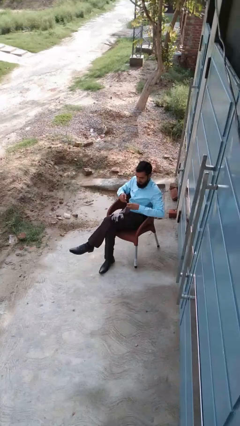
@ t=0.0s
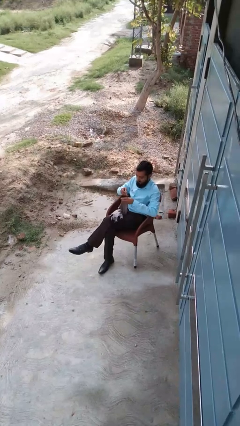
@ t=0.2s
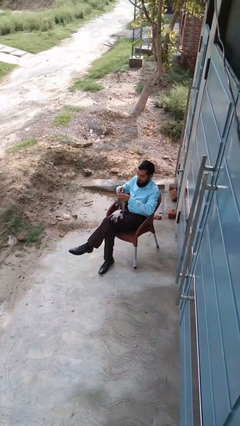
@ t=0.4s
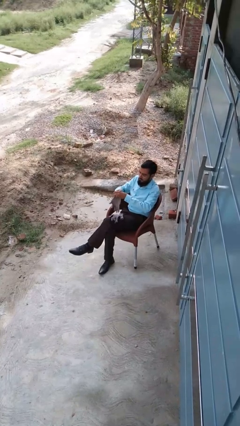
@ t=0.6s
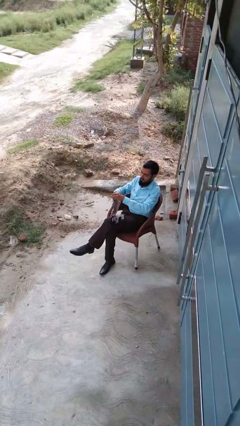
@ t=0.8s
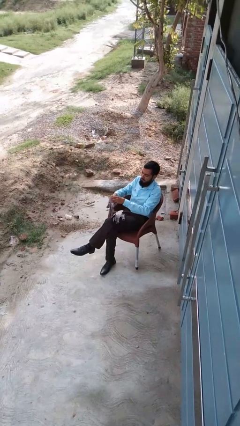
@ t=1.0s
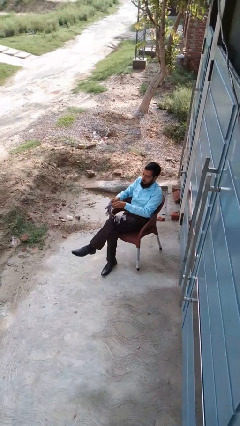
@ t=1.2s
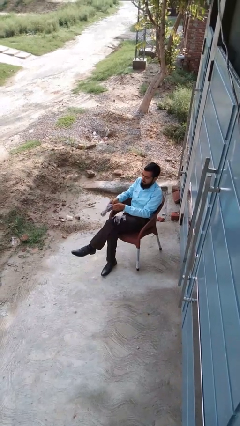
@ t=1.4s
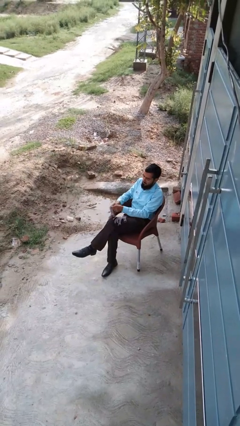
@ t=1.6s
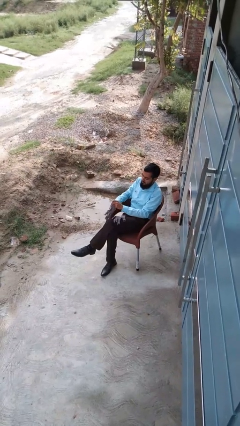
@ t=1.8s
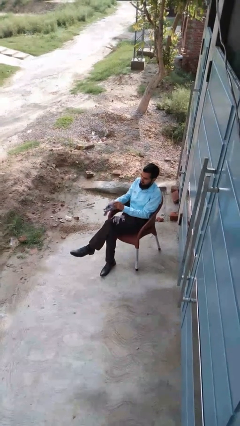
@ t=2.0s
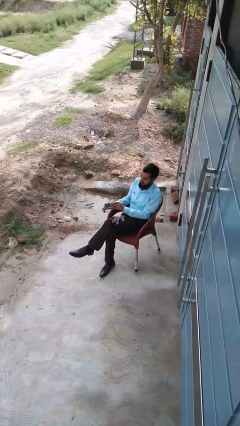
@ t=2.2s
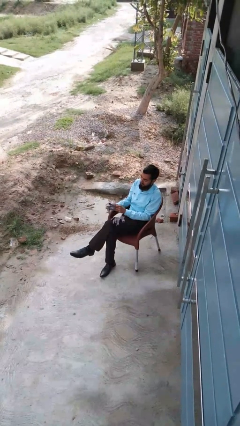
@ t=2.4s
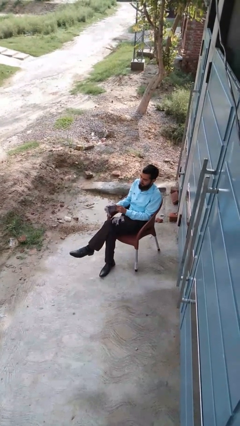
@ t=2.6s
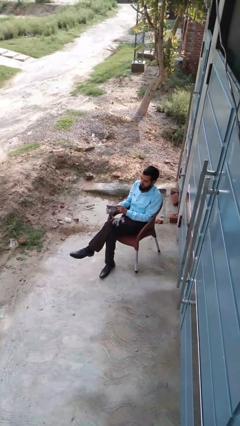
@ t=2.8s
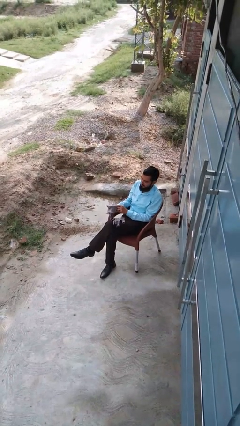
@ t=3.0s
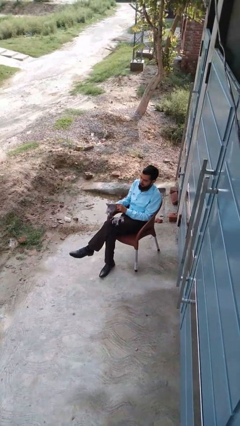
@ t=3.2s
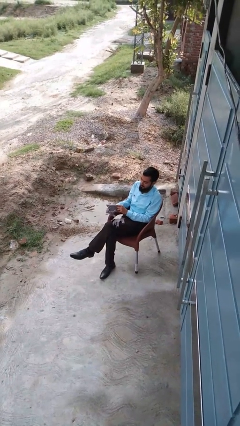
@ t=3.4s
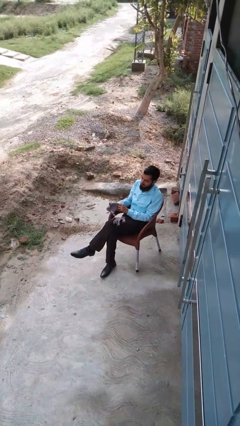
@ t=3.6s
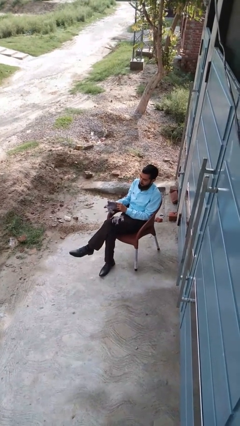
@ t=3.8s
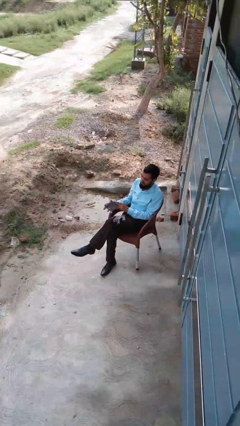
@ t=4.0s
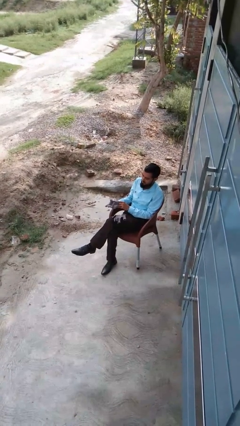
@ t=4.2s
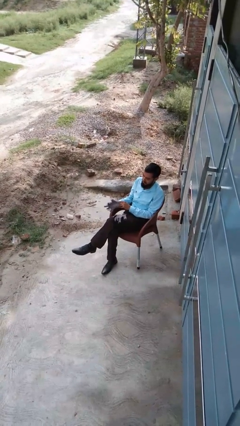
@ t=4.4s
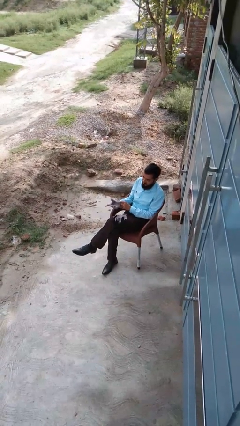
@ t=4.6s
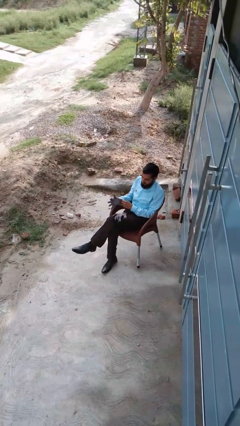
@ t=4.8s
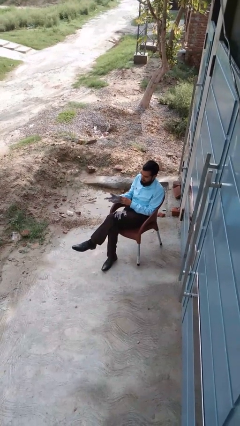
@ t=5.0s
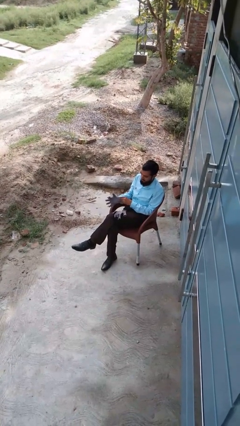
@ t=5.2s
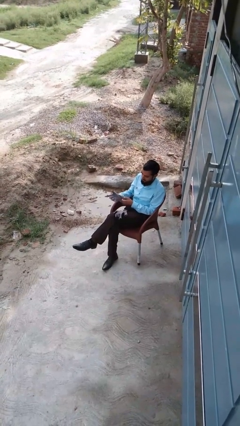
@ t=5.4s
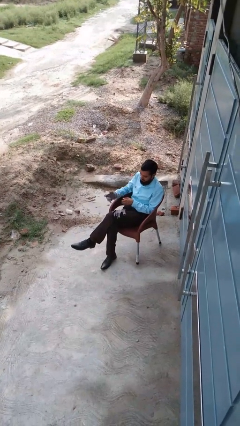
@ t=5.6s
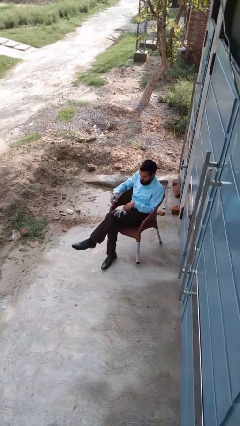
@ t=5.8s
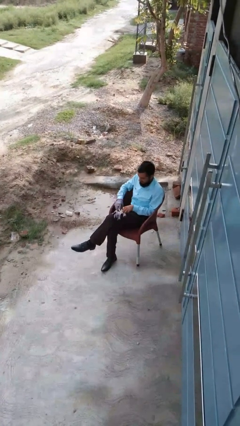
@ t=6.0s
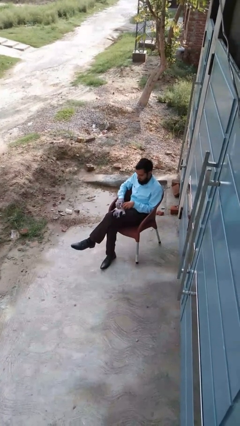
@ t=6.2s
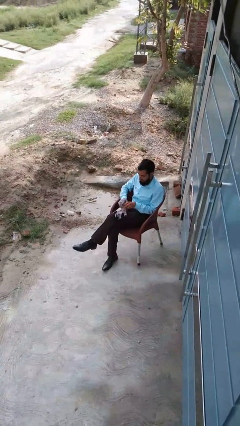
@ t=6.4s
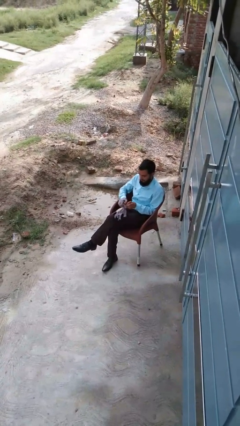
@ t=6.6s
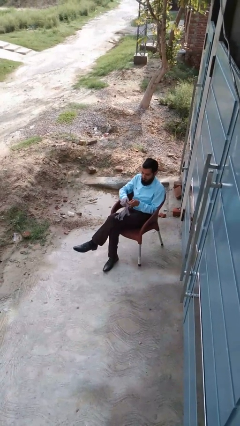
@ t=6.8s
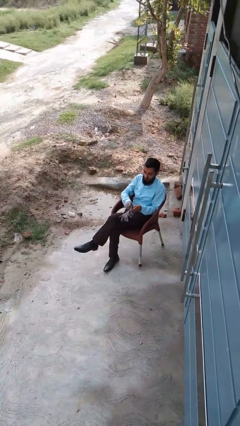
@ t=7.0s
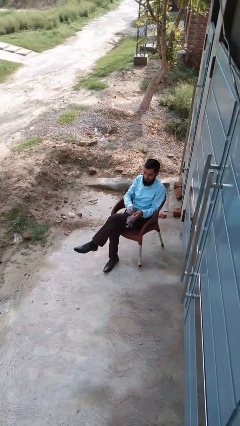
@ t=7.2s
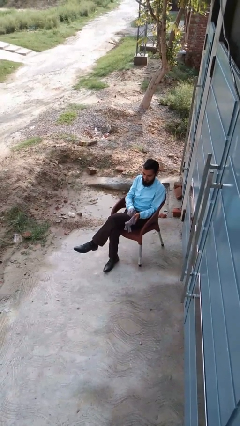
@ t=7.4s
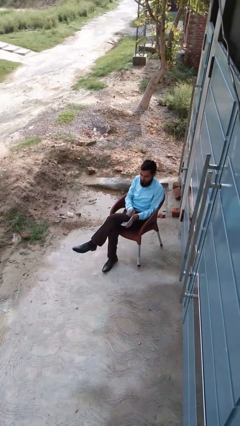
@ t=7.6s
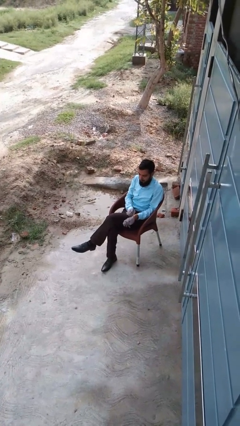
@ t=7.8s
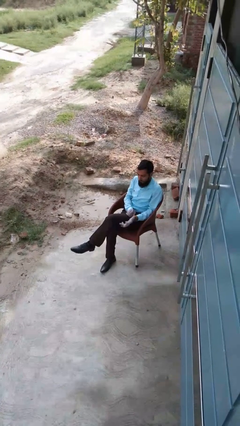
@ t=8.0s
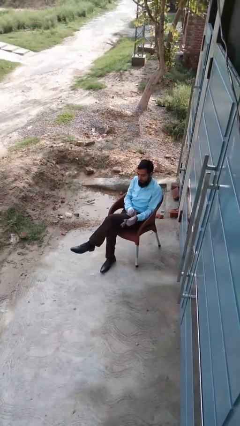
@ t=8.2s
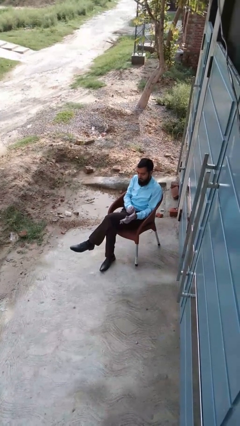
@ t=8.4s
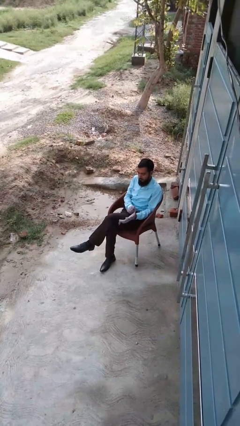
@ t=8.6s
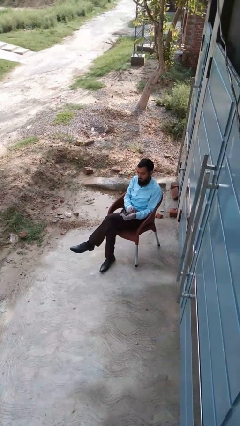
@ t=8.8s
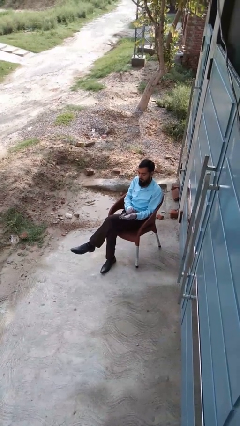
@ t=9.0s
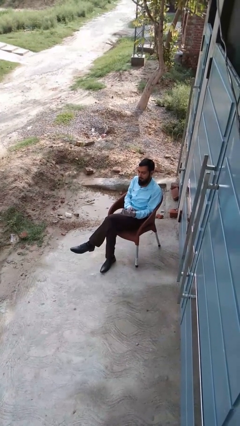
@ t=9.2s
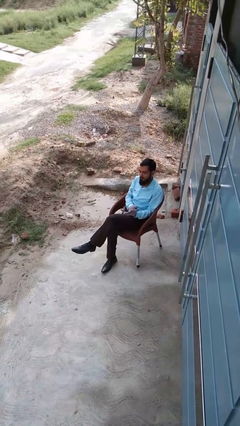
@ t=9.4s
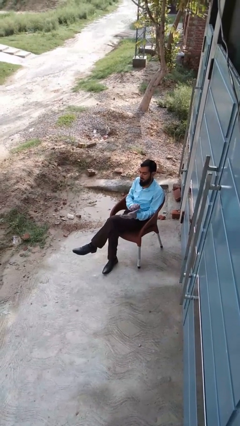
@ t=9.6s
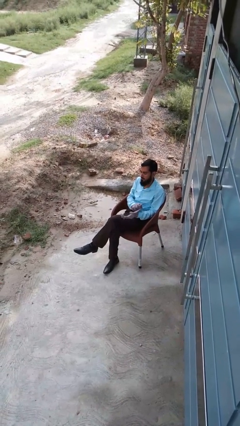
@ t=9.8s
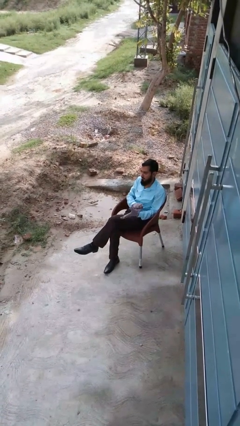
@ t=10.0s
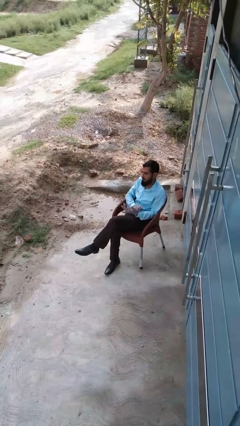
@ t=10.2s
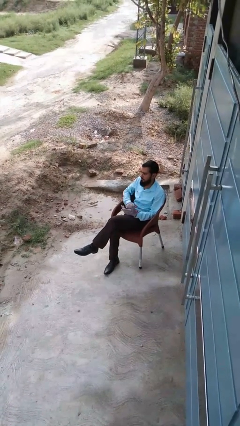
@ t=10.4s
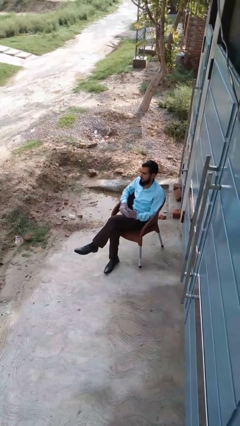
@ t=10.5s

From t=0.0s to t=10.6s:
person puts on gloves

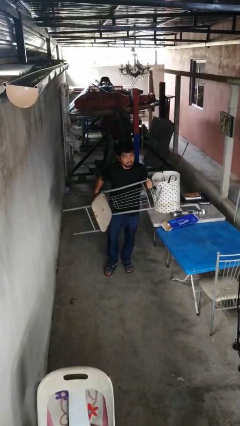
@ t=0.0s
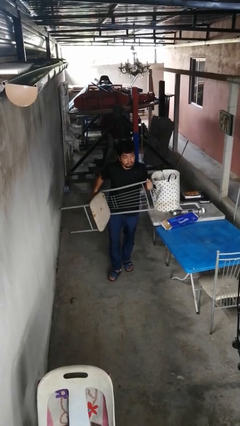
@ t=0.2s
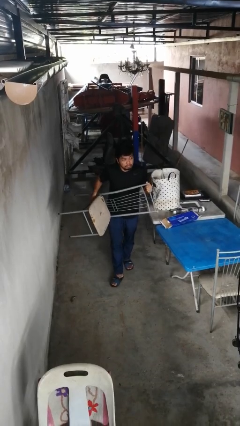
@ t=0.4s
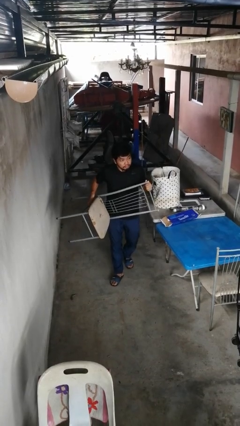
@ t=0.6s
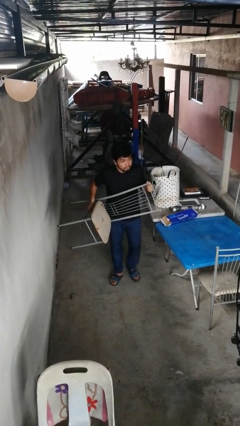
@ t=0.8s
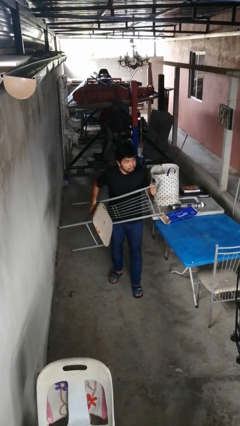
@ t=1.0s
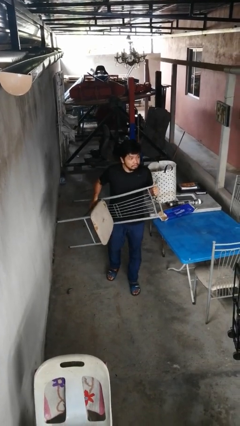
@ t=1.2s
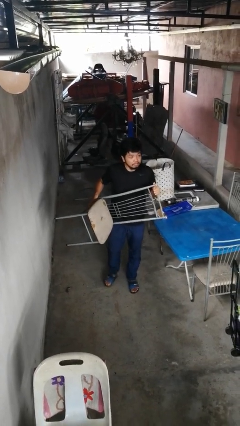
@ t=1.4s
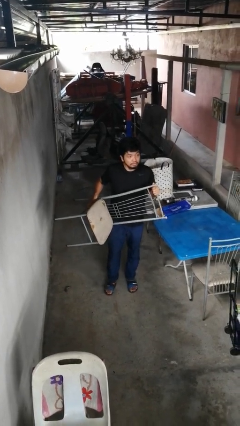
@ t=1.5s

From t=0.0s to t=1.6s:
person carries furniture

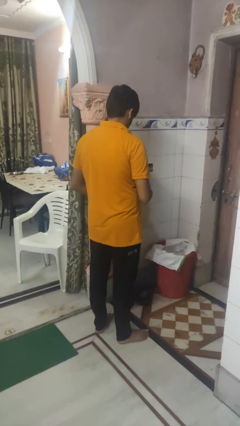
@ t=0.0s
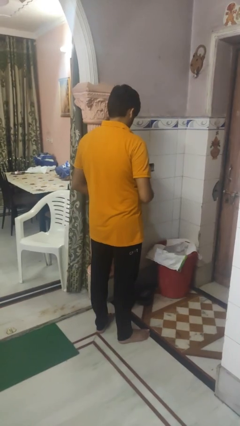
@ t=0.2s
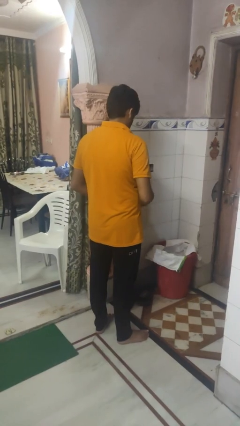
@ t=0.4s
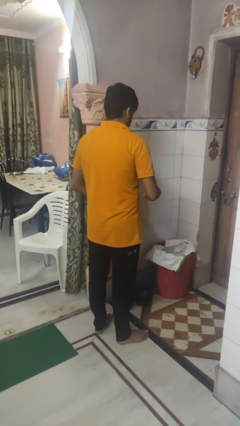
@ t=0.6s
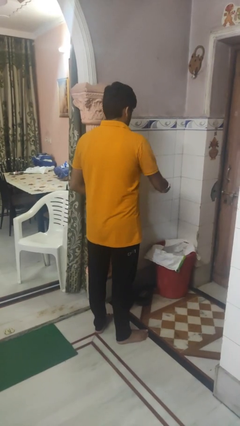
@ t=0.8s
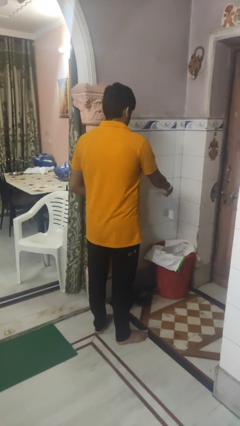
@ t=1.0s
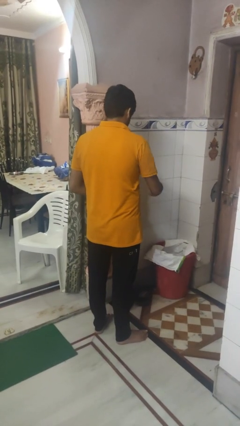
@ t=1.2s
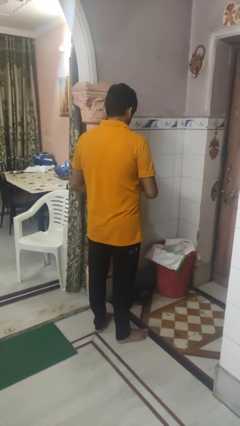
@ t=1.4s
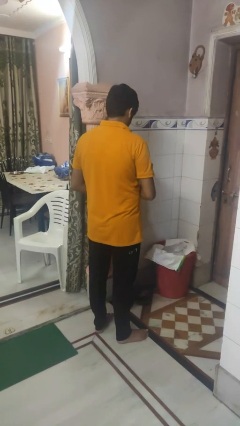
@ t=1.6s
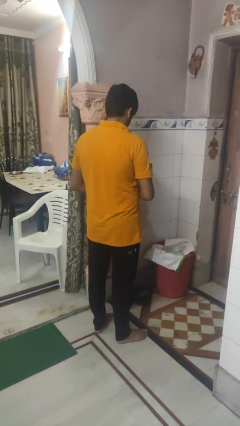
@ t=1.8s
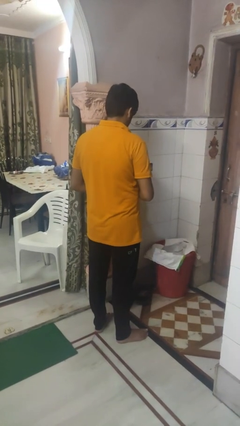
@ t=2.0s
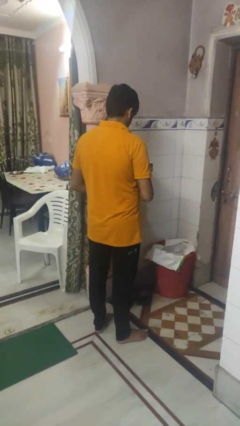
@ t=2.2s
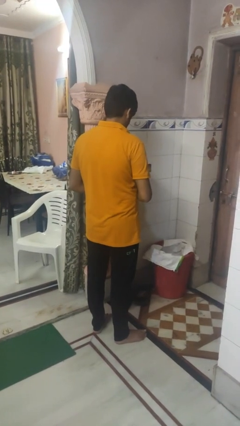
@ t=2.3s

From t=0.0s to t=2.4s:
person discards trash

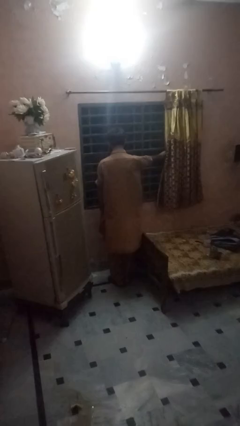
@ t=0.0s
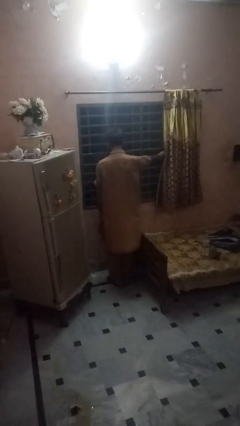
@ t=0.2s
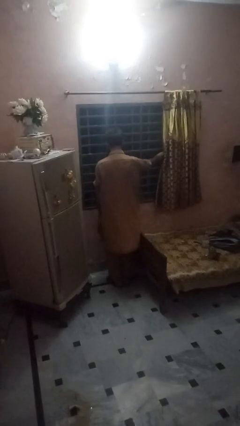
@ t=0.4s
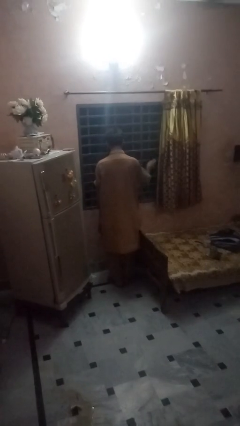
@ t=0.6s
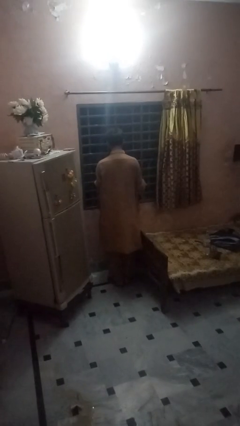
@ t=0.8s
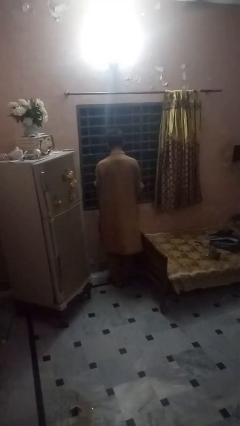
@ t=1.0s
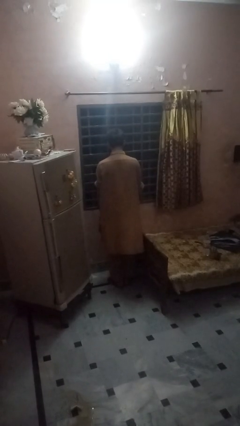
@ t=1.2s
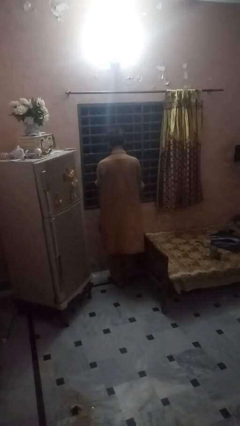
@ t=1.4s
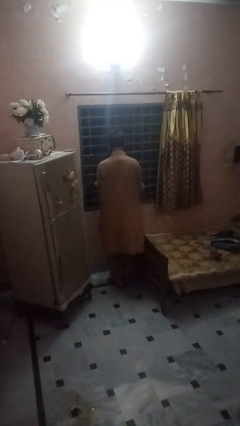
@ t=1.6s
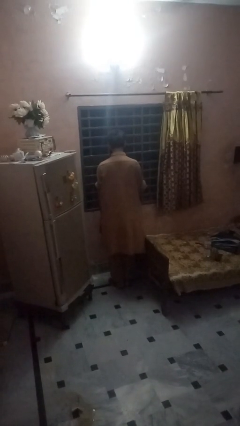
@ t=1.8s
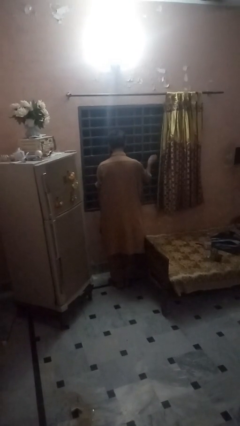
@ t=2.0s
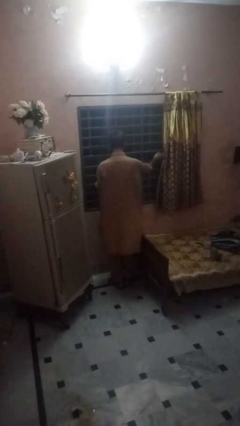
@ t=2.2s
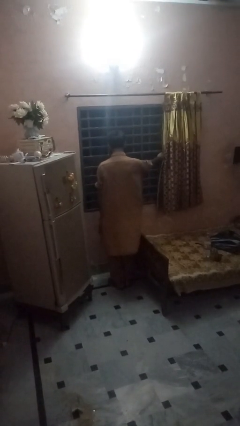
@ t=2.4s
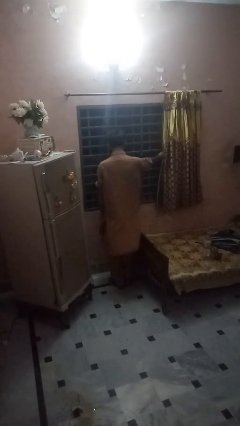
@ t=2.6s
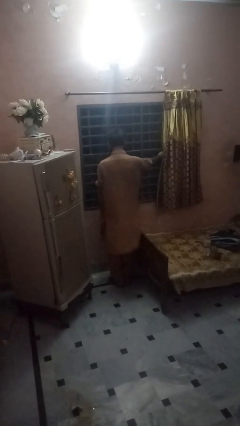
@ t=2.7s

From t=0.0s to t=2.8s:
person closes home window

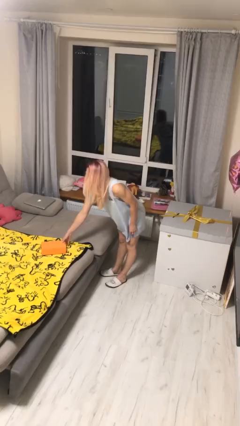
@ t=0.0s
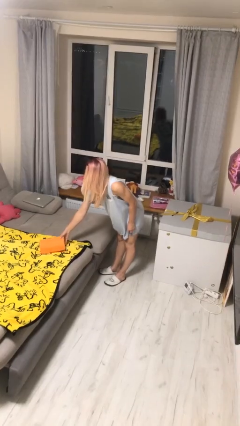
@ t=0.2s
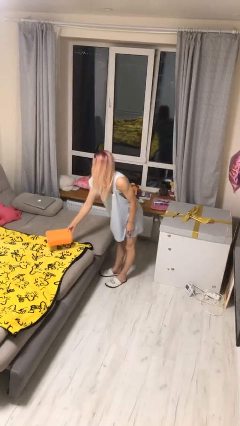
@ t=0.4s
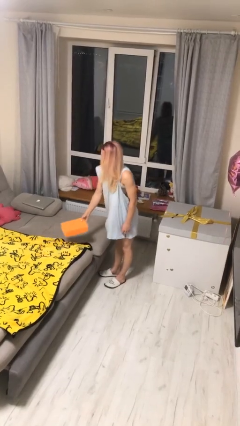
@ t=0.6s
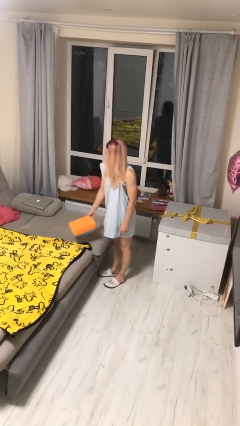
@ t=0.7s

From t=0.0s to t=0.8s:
person picks up object from bed
